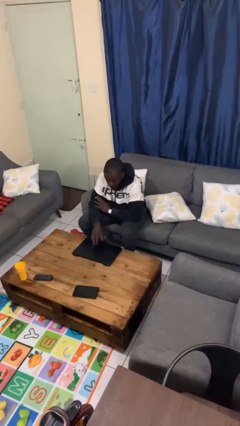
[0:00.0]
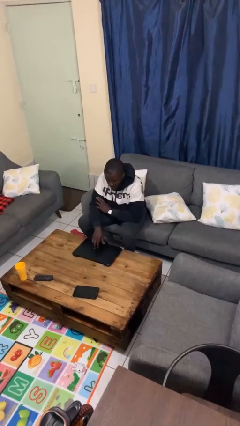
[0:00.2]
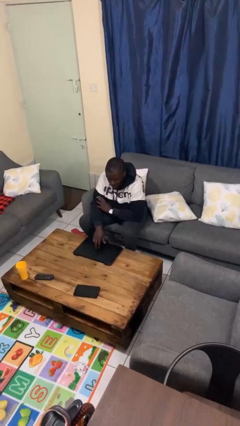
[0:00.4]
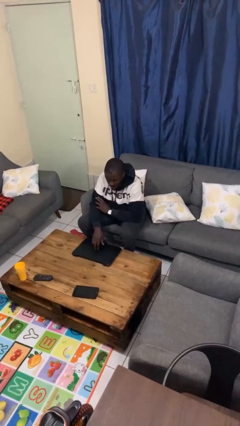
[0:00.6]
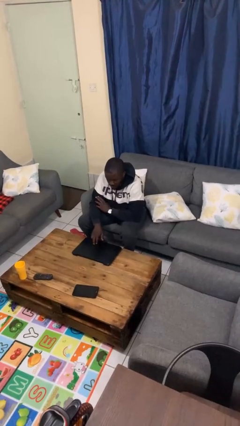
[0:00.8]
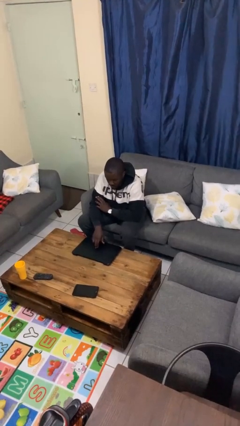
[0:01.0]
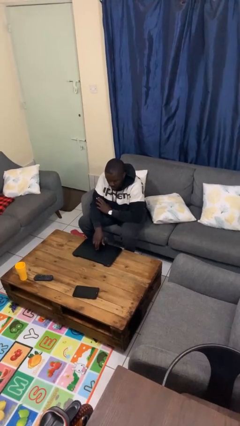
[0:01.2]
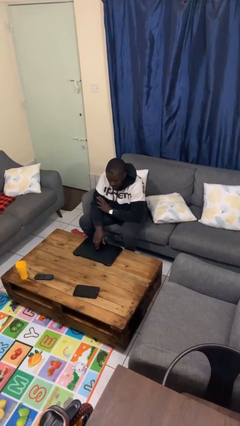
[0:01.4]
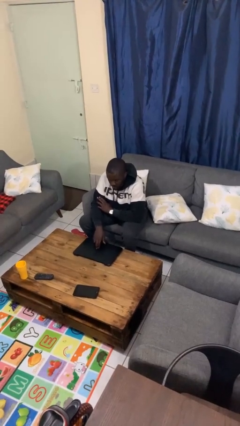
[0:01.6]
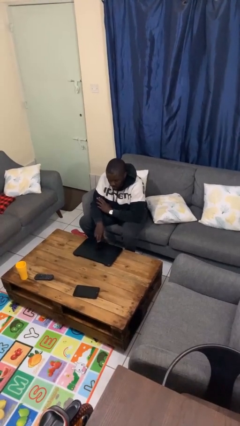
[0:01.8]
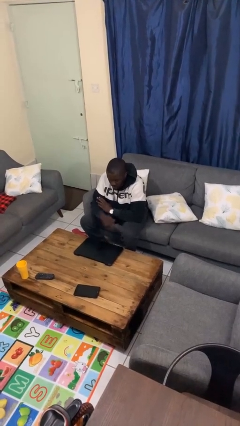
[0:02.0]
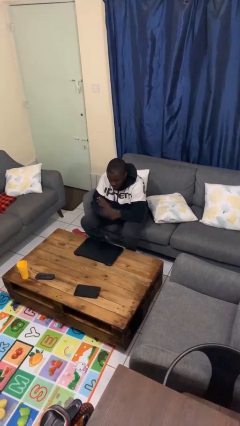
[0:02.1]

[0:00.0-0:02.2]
person taps object with finger

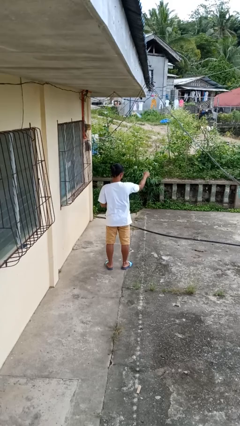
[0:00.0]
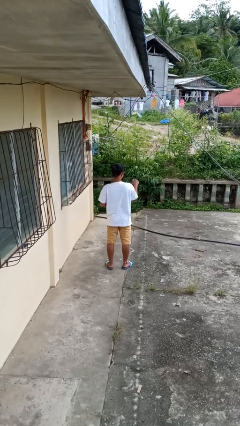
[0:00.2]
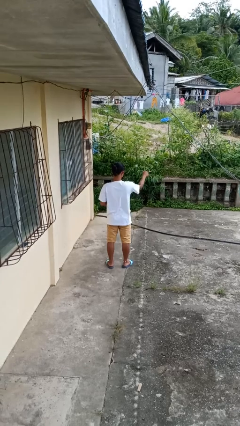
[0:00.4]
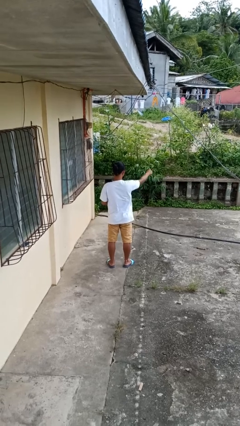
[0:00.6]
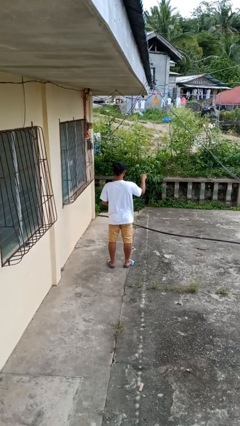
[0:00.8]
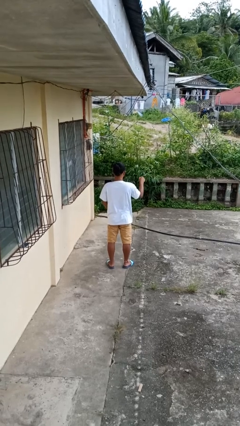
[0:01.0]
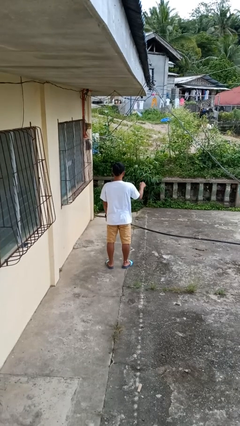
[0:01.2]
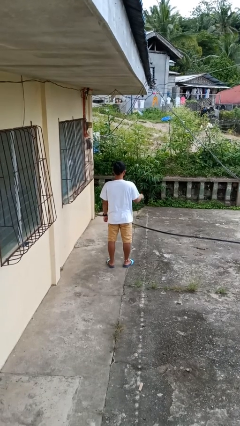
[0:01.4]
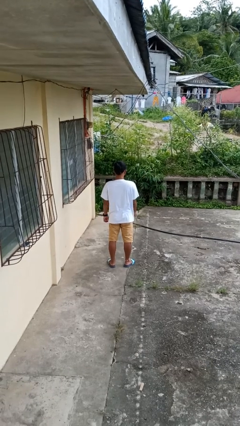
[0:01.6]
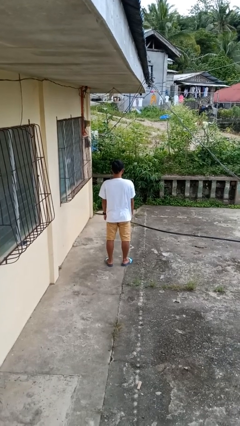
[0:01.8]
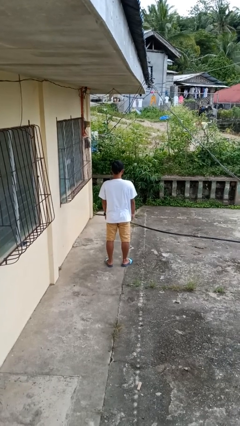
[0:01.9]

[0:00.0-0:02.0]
person punches

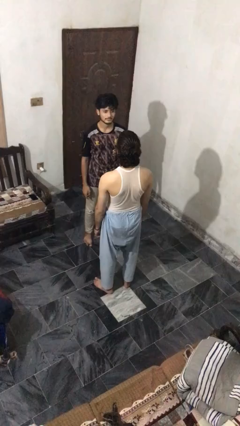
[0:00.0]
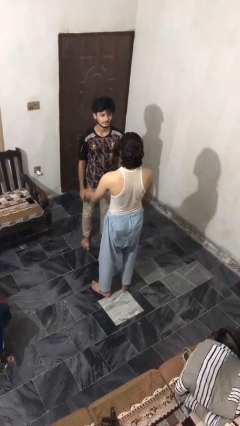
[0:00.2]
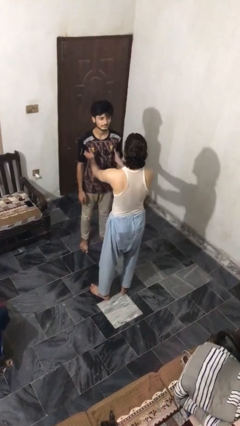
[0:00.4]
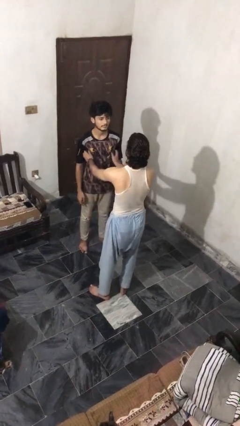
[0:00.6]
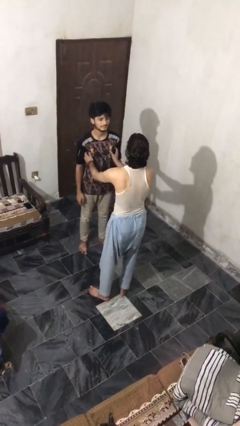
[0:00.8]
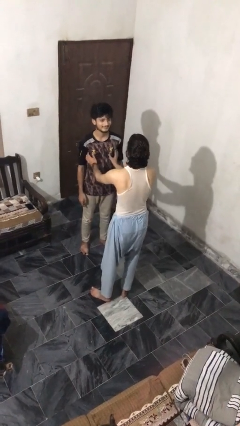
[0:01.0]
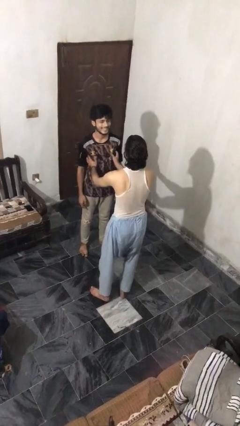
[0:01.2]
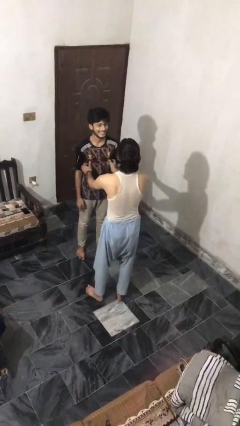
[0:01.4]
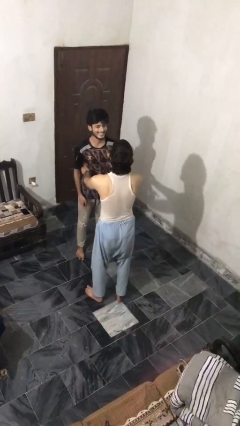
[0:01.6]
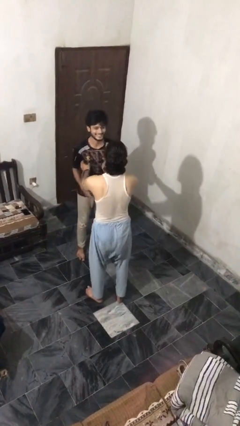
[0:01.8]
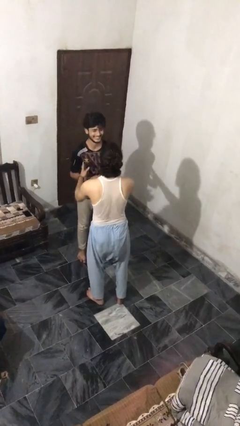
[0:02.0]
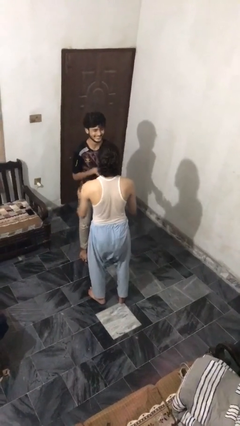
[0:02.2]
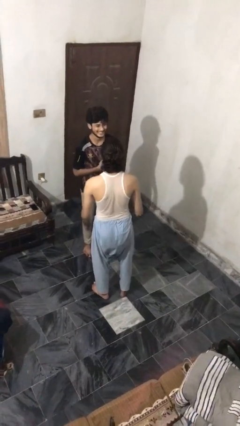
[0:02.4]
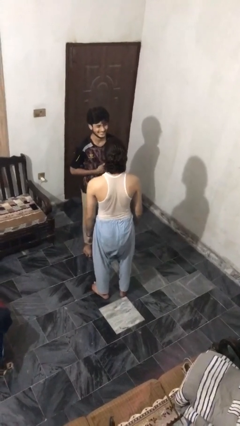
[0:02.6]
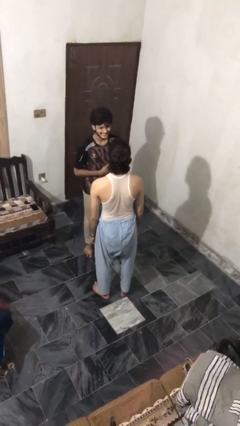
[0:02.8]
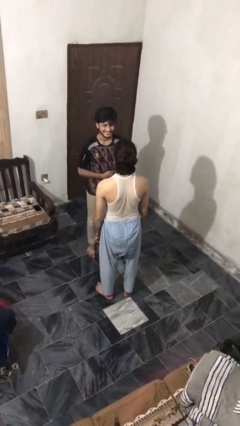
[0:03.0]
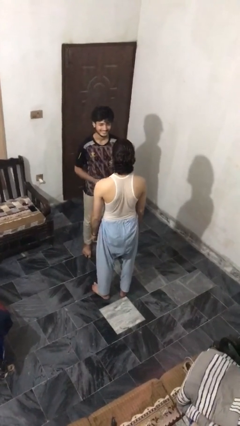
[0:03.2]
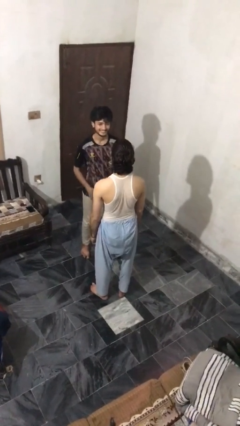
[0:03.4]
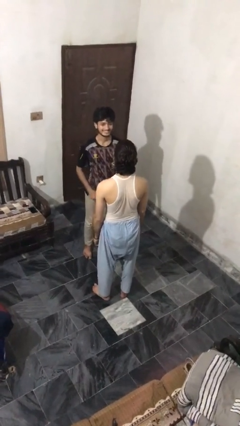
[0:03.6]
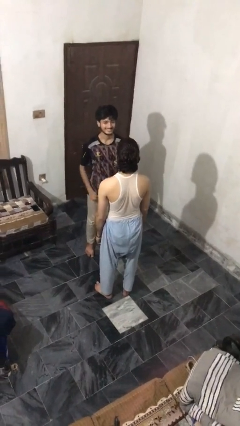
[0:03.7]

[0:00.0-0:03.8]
person tickles person

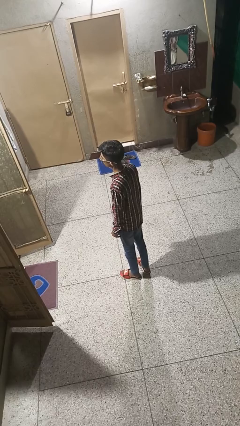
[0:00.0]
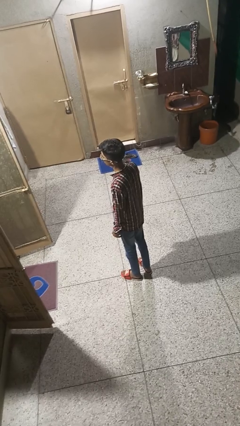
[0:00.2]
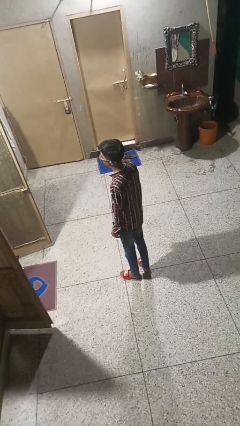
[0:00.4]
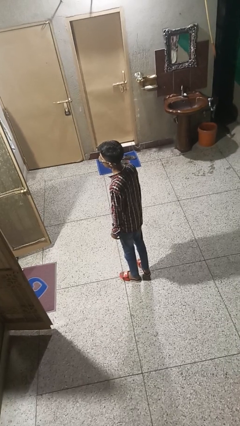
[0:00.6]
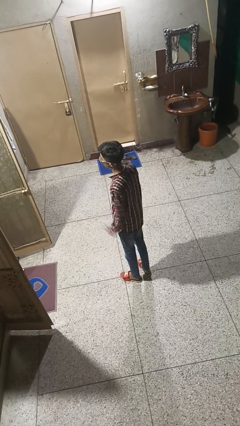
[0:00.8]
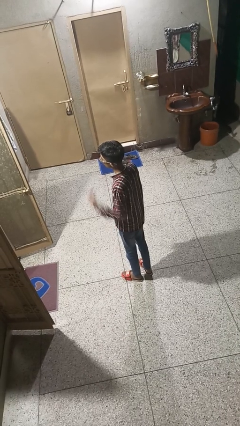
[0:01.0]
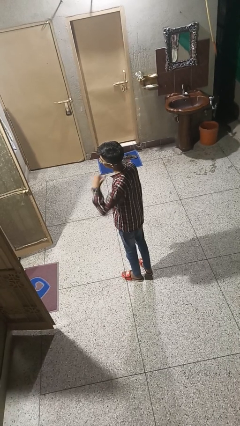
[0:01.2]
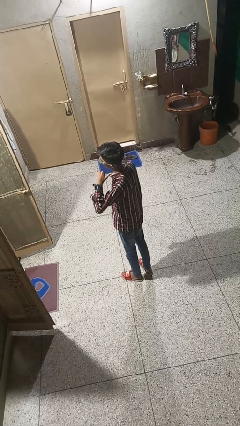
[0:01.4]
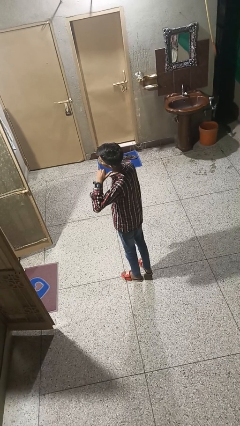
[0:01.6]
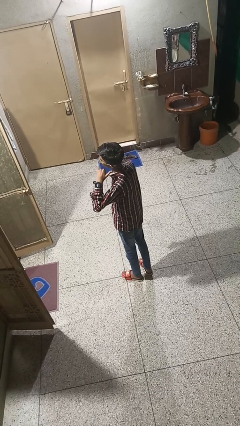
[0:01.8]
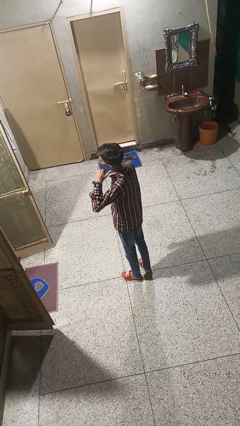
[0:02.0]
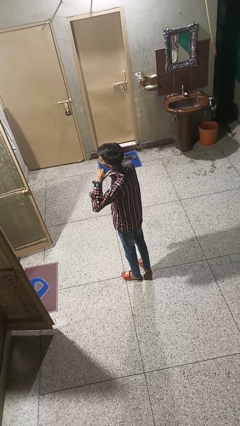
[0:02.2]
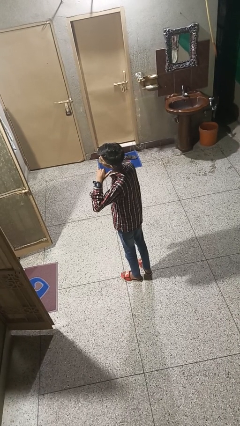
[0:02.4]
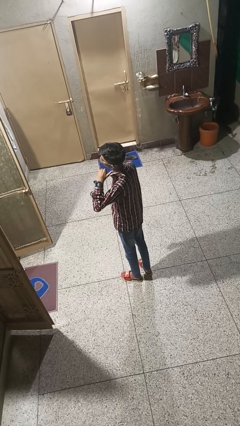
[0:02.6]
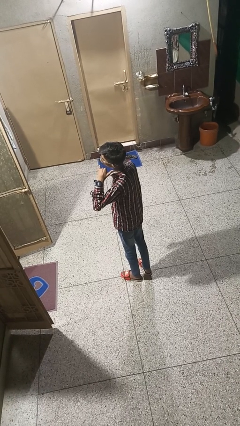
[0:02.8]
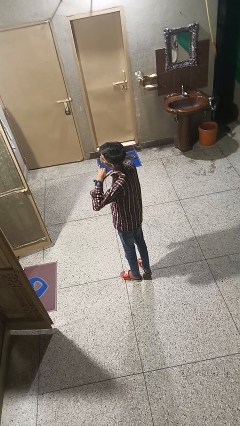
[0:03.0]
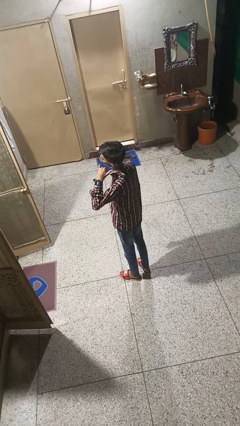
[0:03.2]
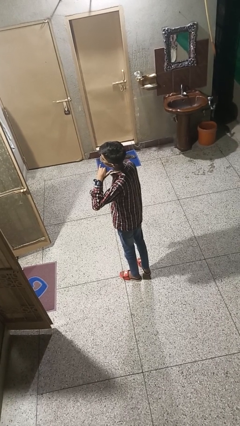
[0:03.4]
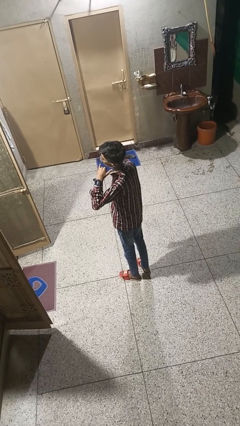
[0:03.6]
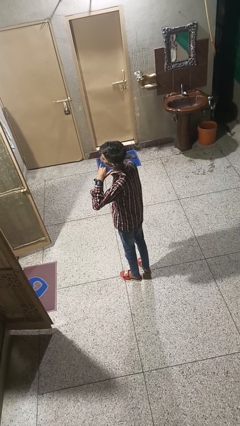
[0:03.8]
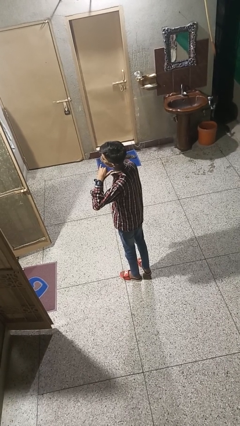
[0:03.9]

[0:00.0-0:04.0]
person gestures call me

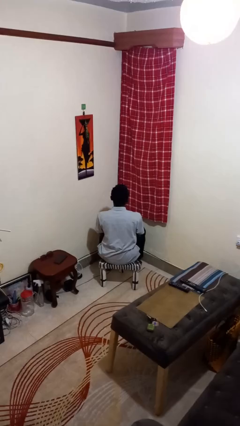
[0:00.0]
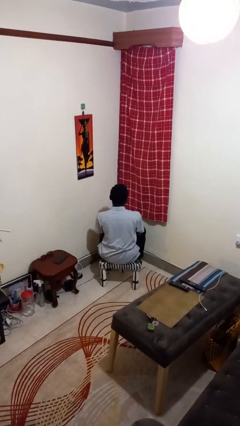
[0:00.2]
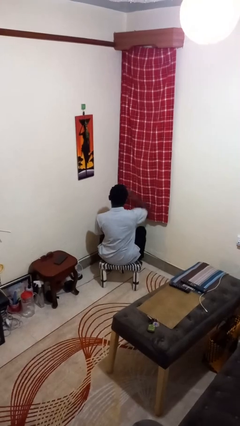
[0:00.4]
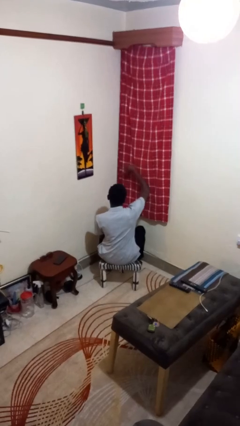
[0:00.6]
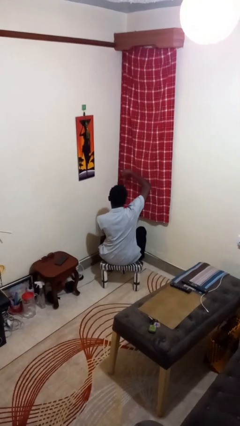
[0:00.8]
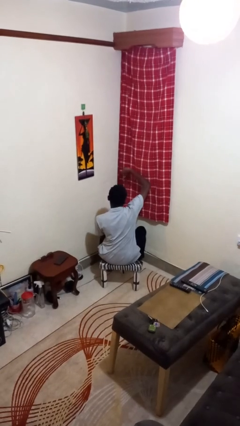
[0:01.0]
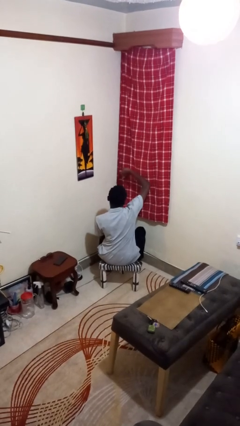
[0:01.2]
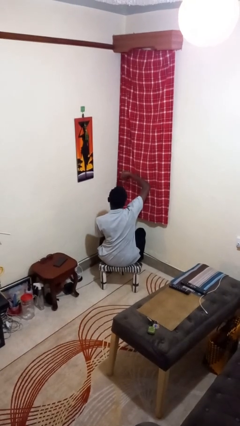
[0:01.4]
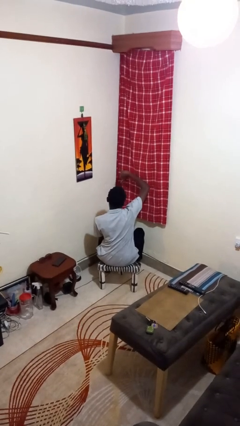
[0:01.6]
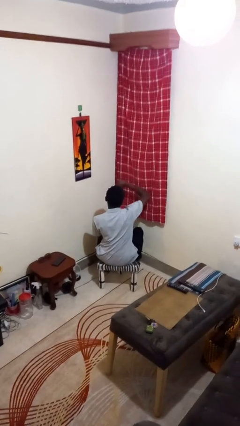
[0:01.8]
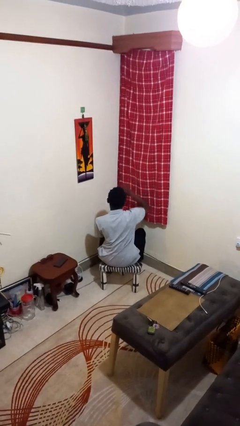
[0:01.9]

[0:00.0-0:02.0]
person gestures thumbs down

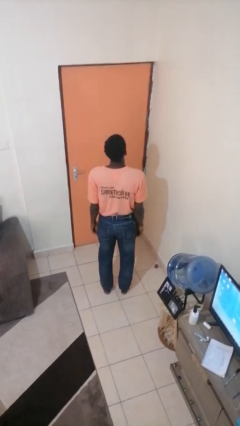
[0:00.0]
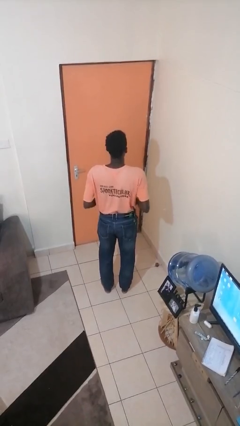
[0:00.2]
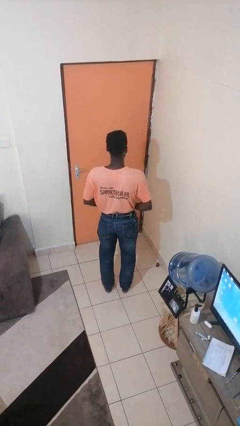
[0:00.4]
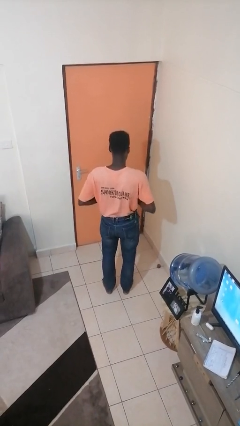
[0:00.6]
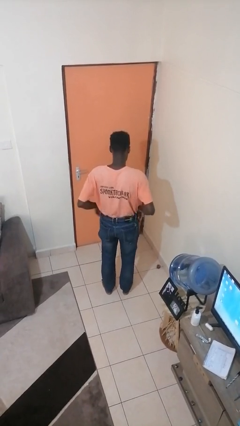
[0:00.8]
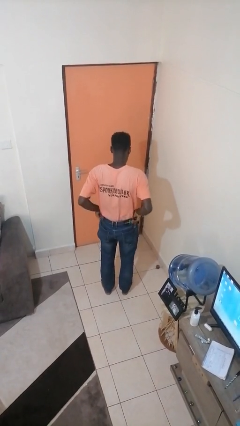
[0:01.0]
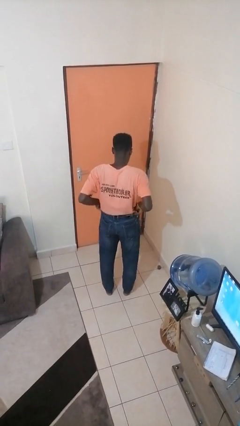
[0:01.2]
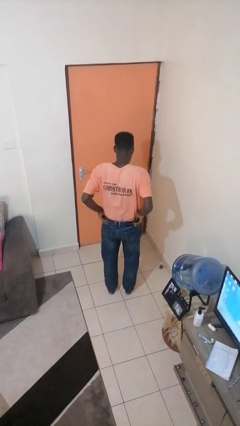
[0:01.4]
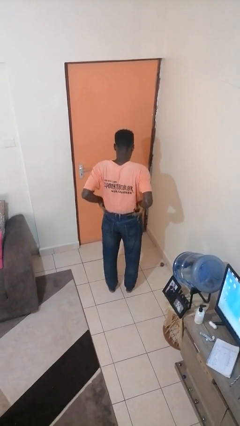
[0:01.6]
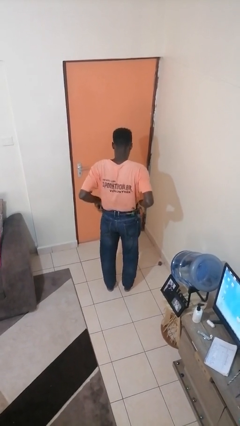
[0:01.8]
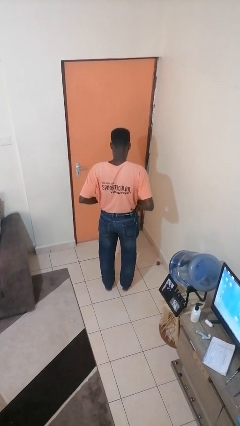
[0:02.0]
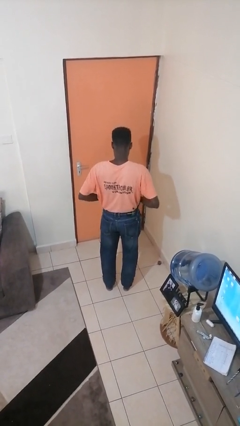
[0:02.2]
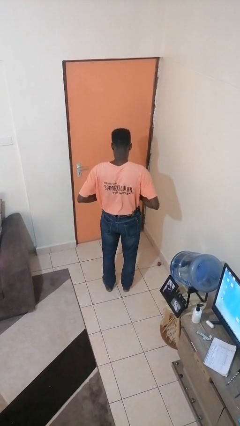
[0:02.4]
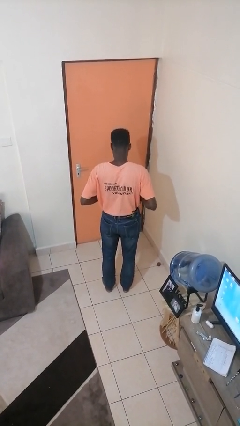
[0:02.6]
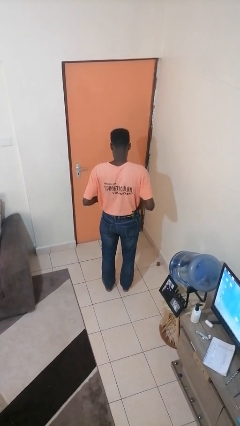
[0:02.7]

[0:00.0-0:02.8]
person hikes up pants
